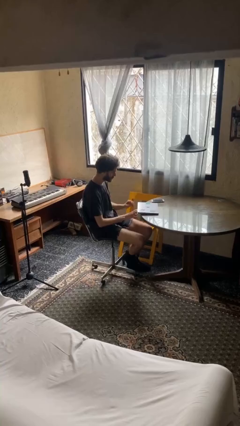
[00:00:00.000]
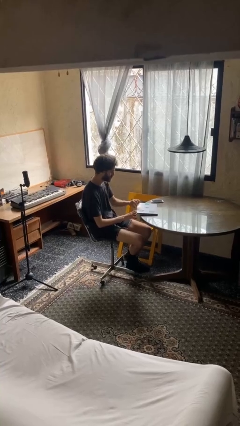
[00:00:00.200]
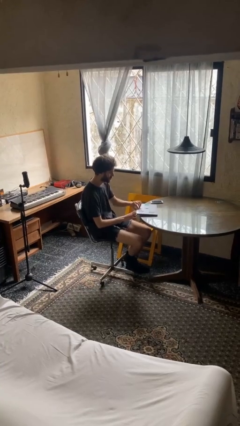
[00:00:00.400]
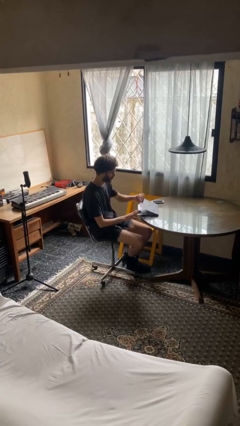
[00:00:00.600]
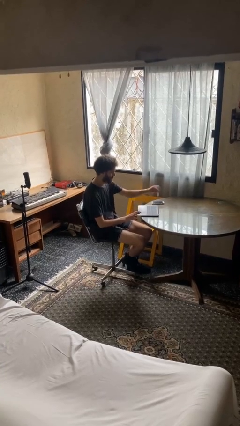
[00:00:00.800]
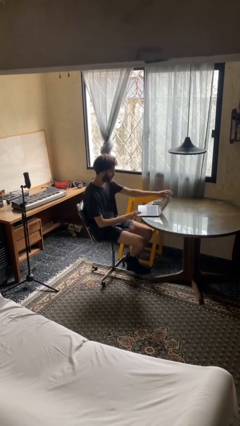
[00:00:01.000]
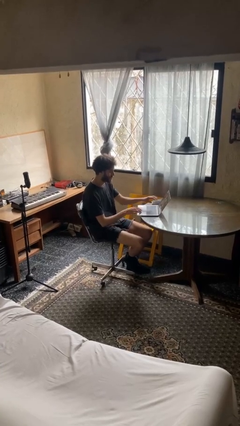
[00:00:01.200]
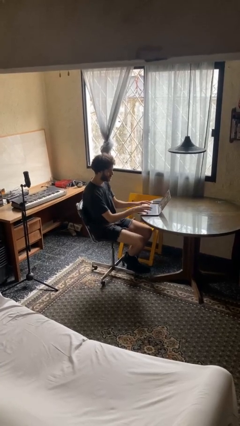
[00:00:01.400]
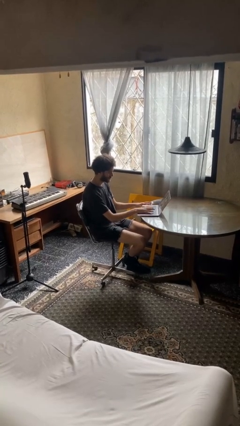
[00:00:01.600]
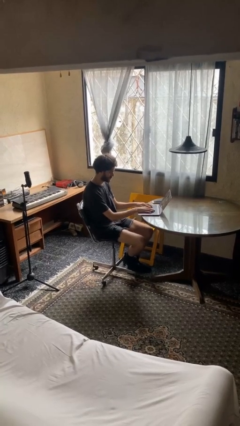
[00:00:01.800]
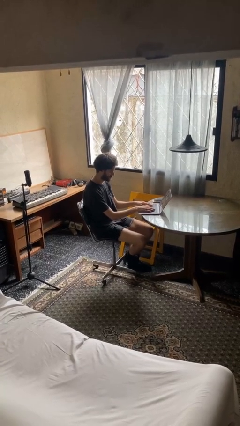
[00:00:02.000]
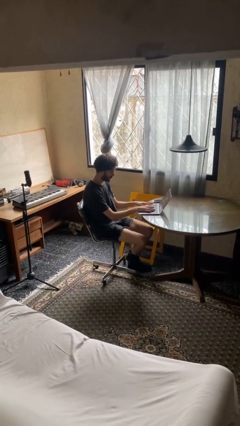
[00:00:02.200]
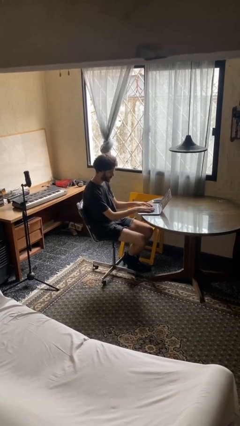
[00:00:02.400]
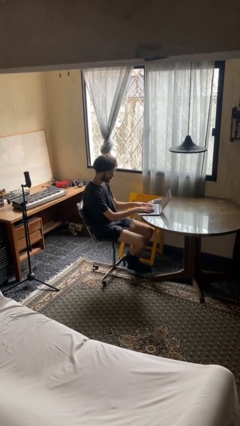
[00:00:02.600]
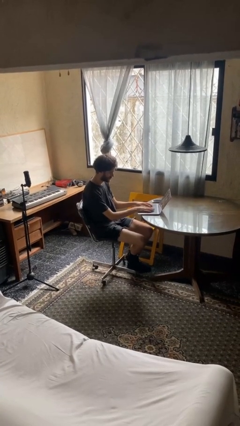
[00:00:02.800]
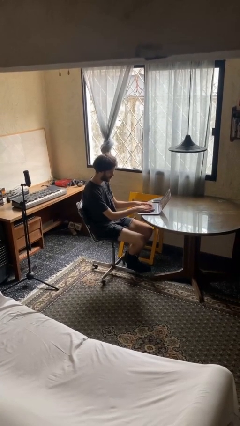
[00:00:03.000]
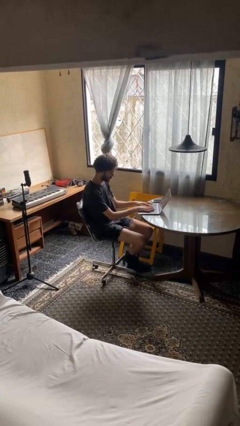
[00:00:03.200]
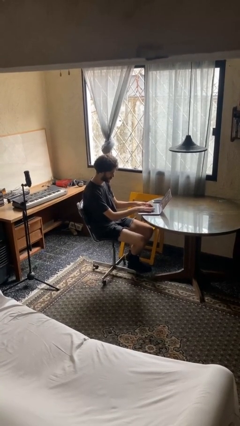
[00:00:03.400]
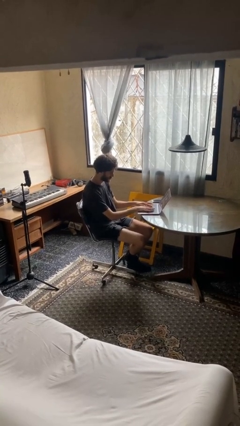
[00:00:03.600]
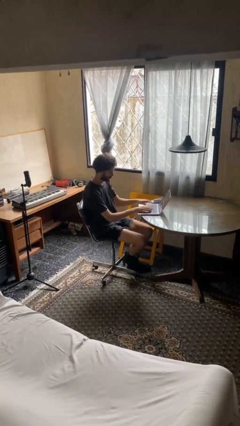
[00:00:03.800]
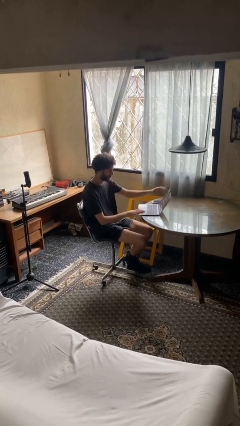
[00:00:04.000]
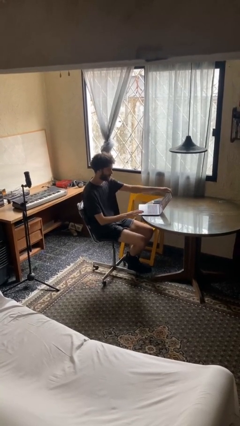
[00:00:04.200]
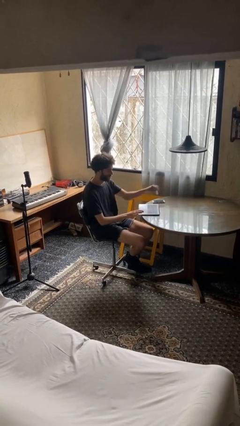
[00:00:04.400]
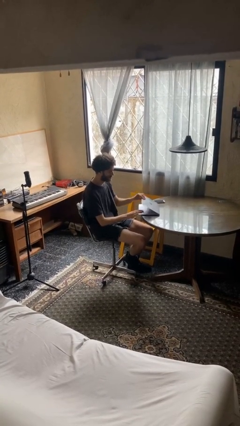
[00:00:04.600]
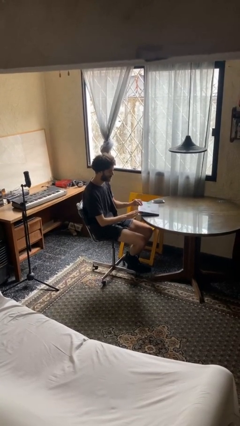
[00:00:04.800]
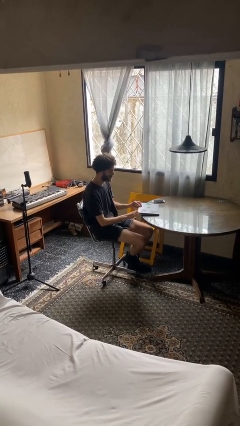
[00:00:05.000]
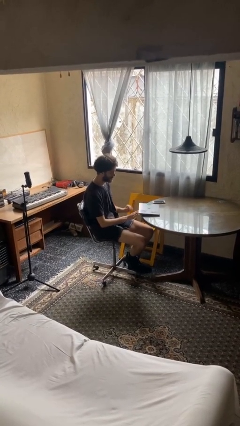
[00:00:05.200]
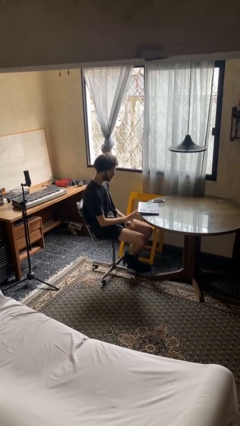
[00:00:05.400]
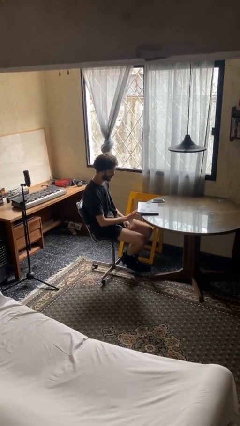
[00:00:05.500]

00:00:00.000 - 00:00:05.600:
person interacts with laptop

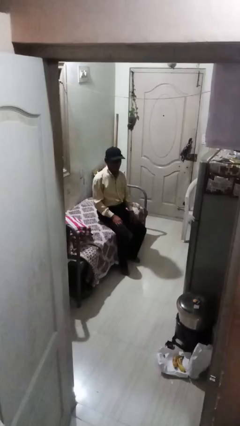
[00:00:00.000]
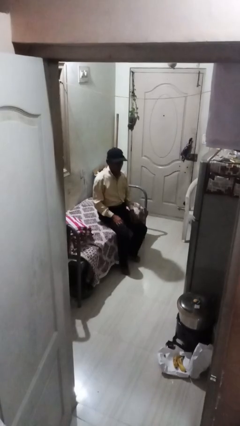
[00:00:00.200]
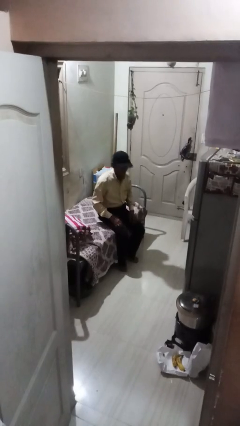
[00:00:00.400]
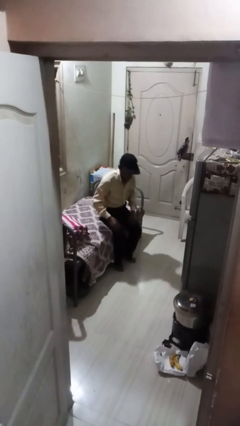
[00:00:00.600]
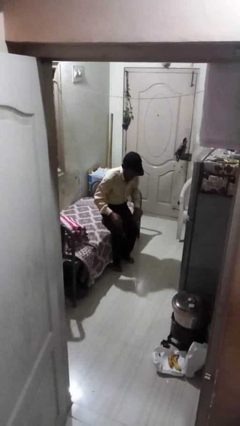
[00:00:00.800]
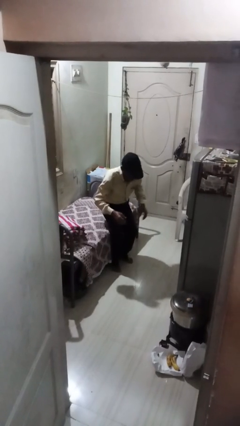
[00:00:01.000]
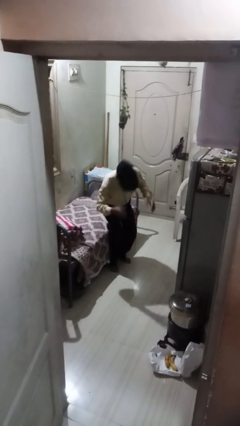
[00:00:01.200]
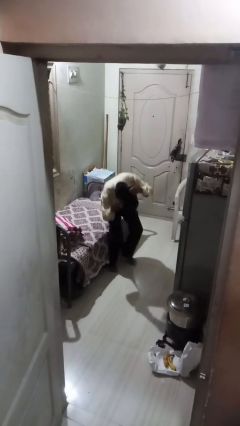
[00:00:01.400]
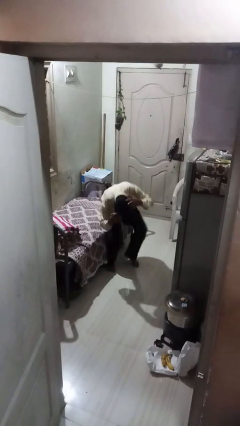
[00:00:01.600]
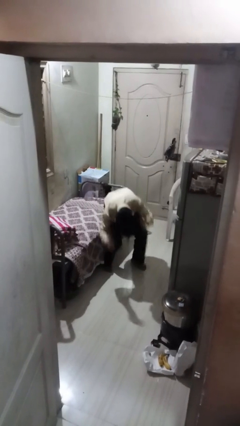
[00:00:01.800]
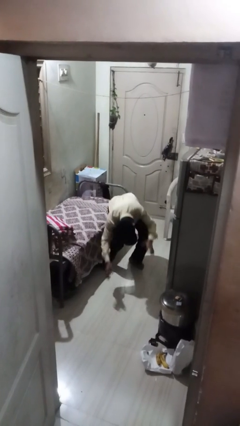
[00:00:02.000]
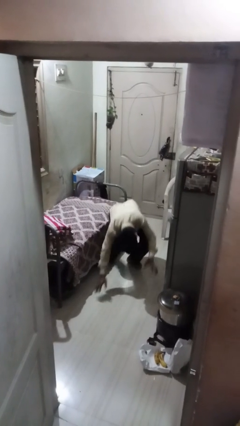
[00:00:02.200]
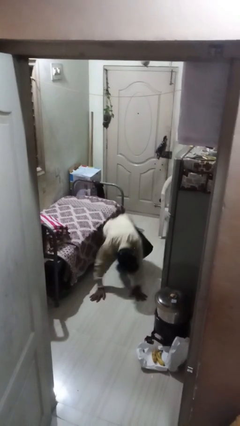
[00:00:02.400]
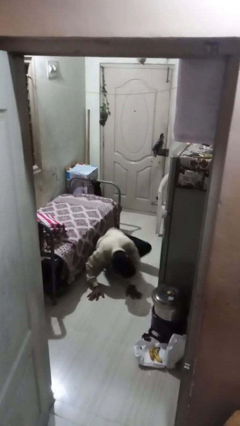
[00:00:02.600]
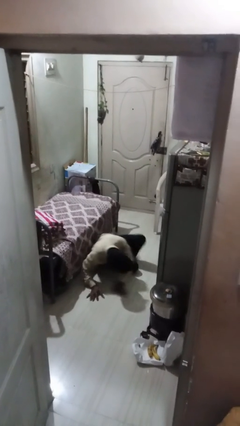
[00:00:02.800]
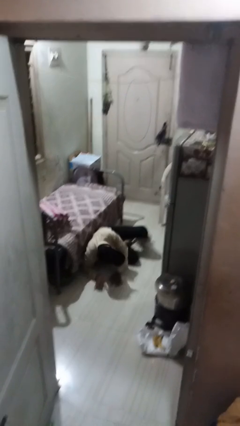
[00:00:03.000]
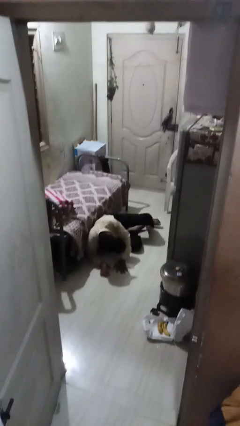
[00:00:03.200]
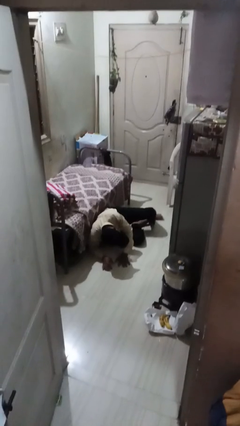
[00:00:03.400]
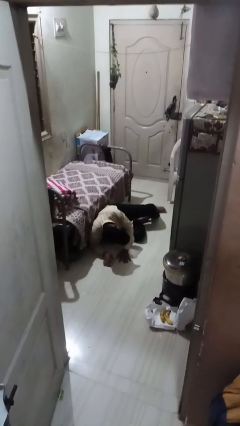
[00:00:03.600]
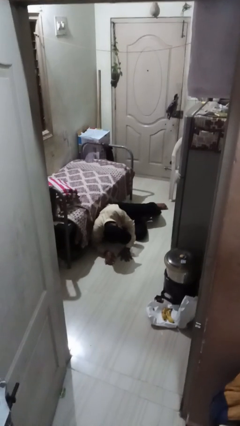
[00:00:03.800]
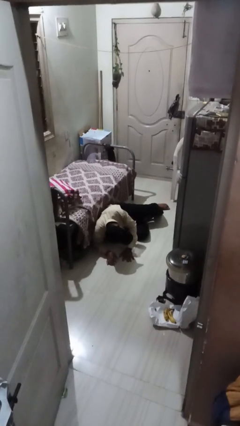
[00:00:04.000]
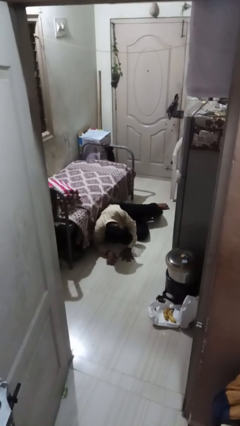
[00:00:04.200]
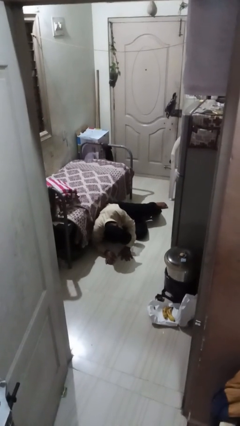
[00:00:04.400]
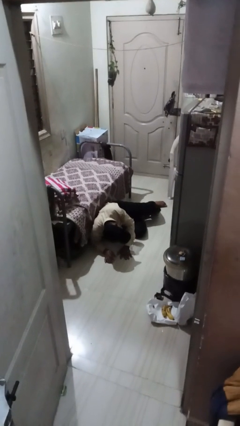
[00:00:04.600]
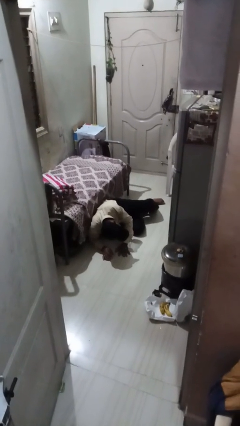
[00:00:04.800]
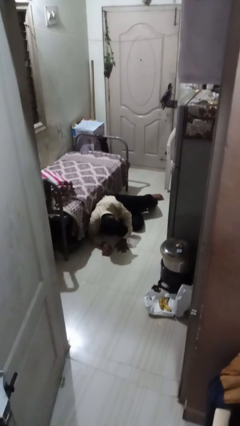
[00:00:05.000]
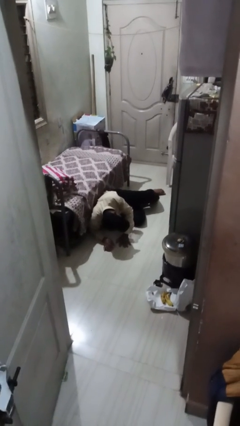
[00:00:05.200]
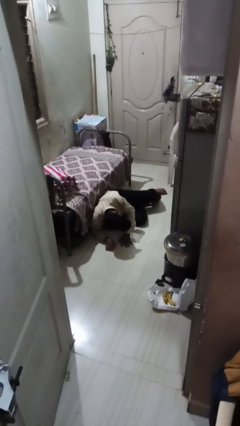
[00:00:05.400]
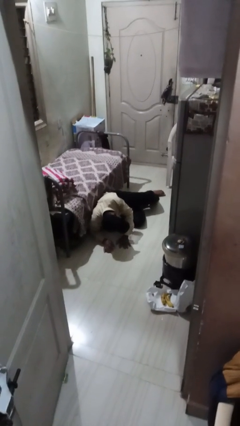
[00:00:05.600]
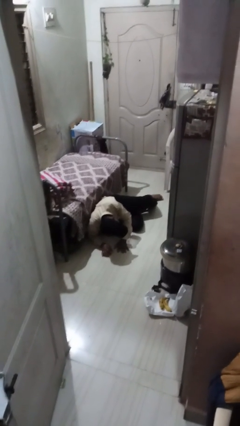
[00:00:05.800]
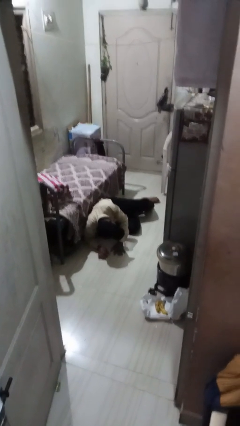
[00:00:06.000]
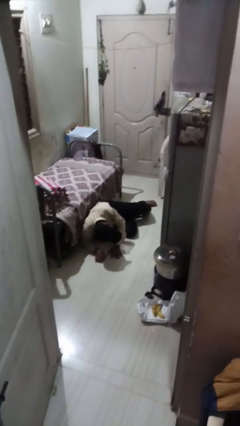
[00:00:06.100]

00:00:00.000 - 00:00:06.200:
person falls while standing

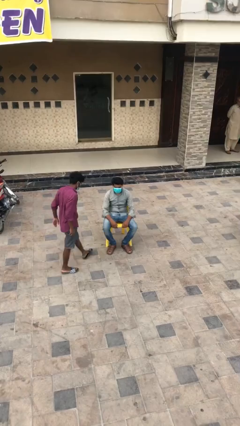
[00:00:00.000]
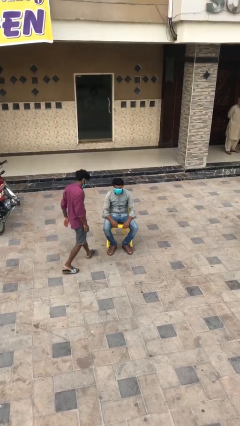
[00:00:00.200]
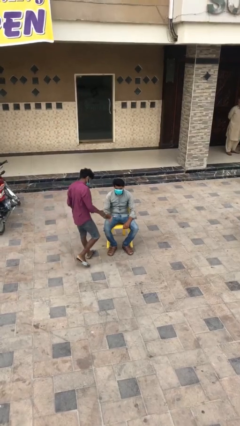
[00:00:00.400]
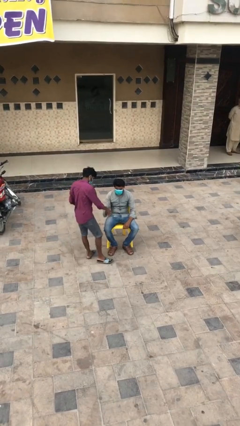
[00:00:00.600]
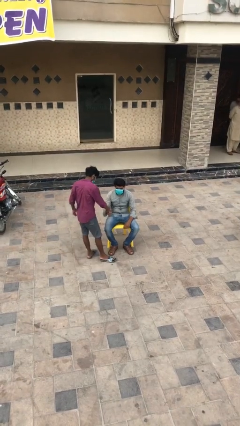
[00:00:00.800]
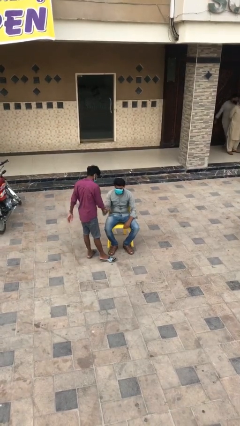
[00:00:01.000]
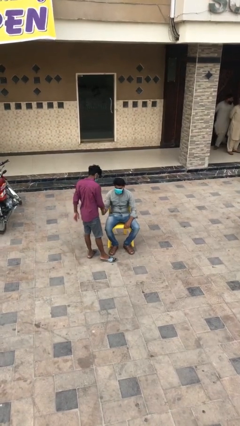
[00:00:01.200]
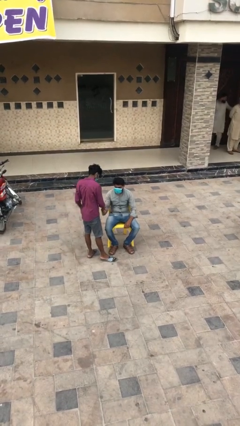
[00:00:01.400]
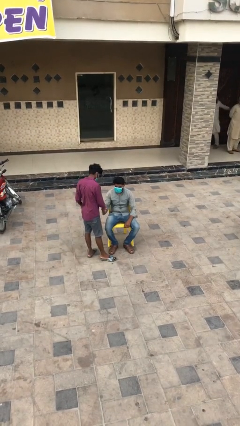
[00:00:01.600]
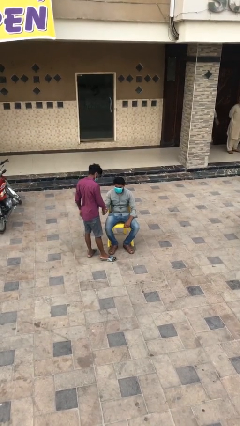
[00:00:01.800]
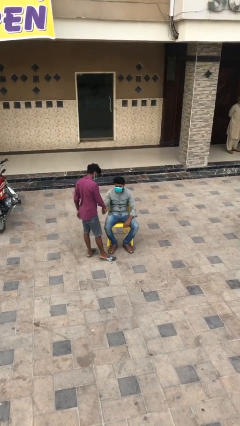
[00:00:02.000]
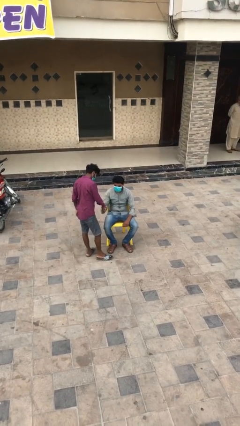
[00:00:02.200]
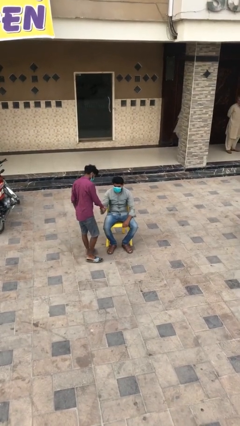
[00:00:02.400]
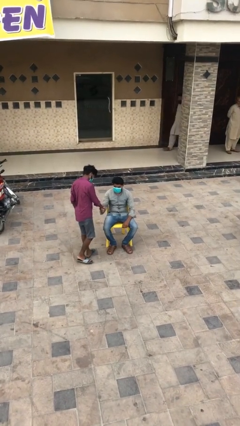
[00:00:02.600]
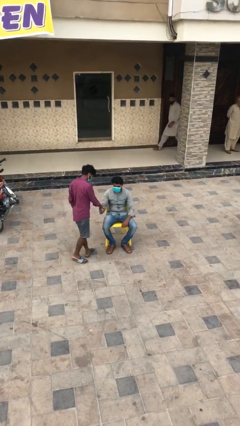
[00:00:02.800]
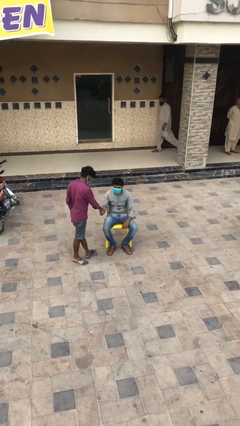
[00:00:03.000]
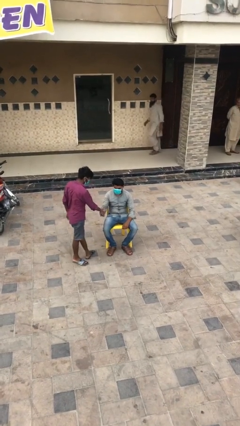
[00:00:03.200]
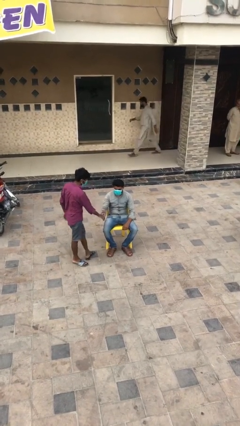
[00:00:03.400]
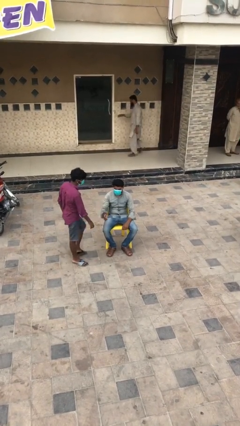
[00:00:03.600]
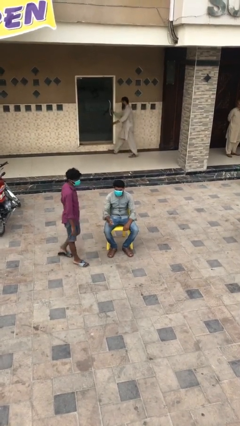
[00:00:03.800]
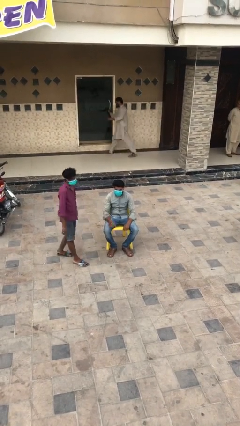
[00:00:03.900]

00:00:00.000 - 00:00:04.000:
person shakes hand

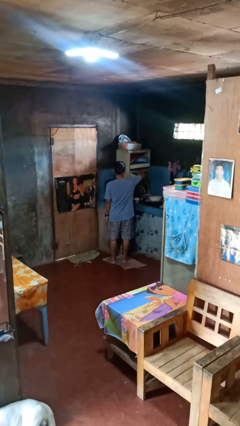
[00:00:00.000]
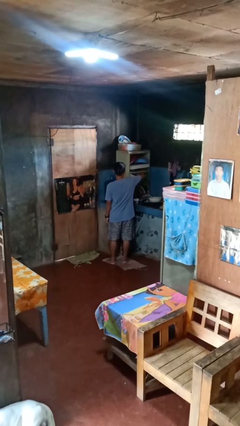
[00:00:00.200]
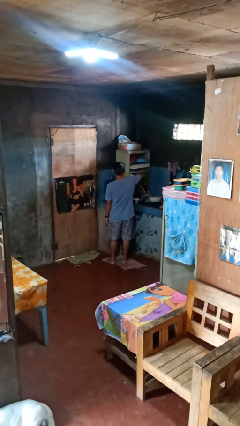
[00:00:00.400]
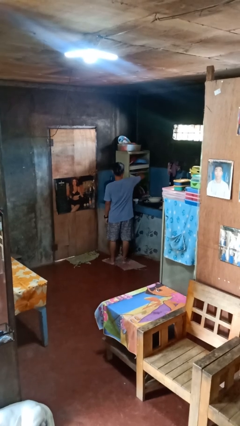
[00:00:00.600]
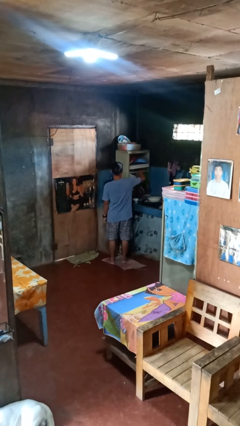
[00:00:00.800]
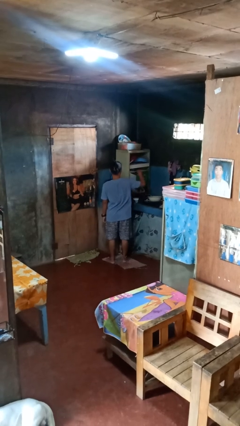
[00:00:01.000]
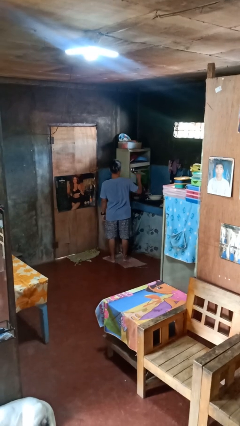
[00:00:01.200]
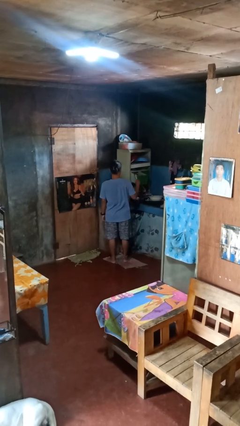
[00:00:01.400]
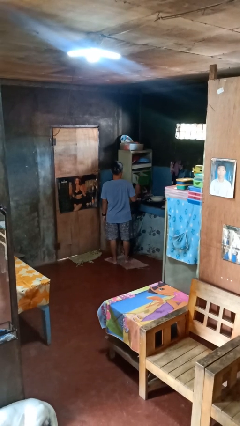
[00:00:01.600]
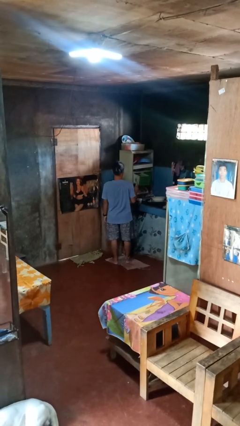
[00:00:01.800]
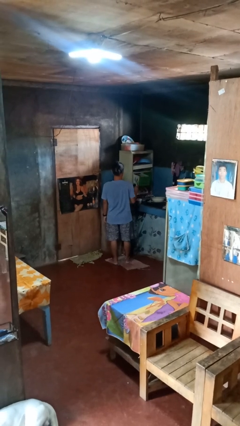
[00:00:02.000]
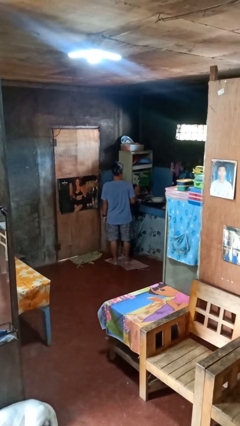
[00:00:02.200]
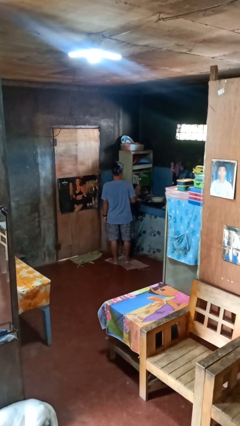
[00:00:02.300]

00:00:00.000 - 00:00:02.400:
person takes object from kitchen drawer
